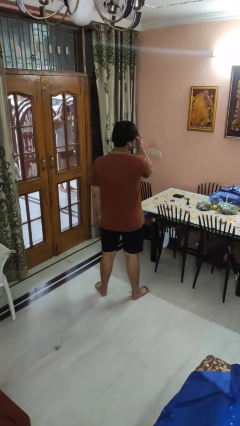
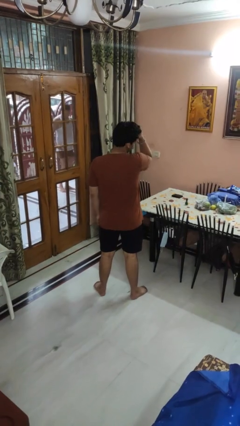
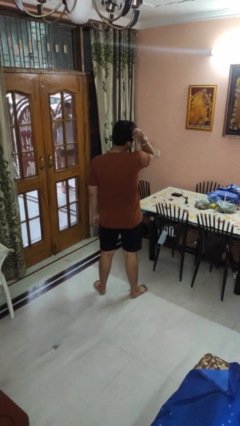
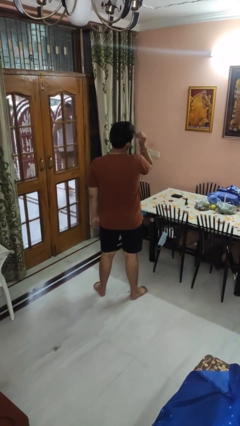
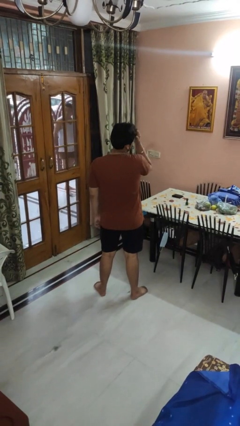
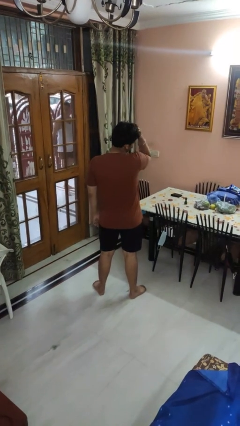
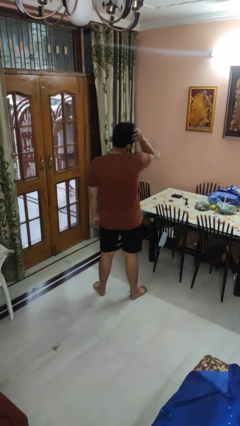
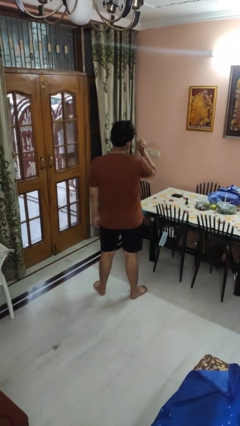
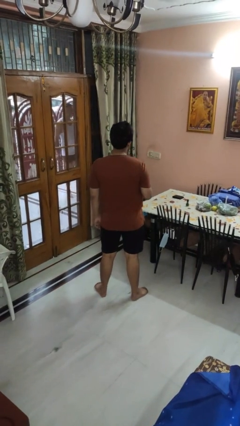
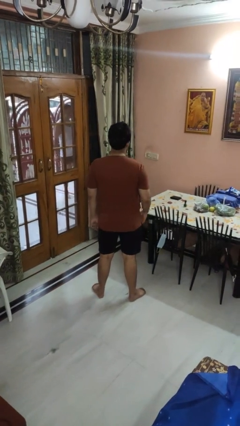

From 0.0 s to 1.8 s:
person strokes hair

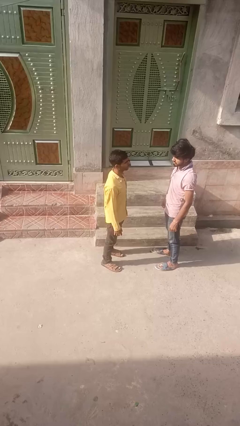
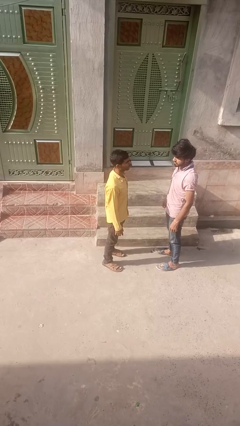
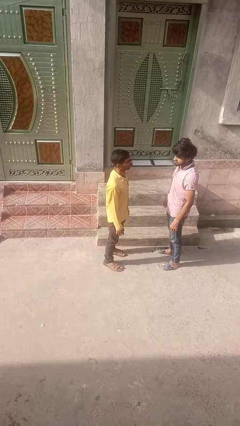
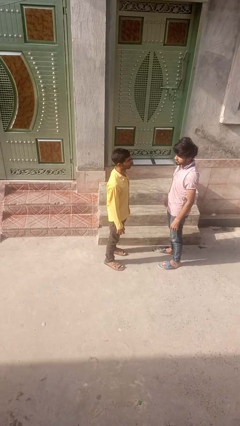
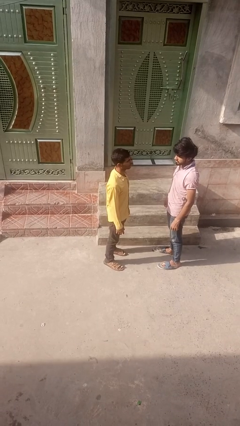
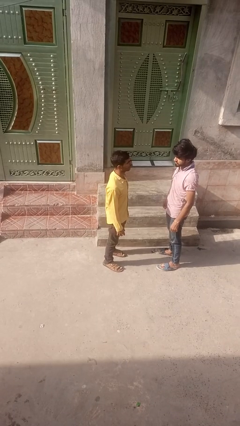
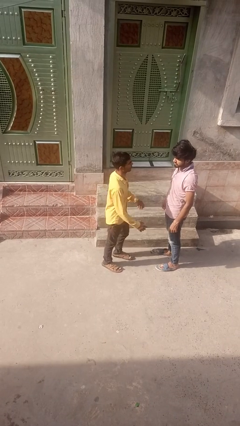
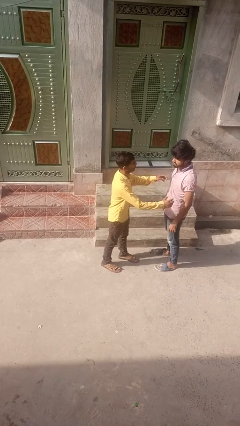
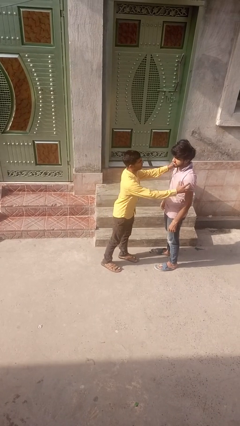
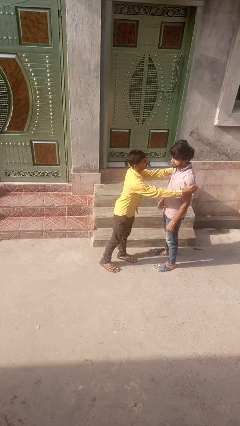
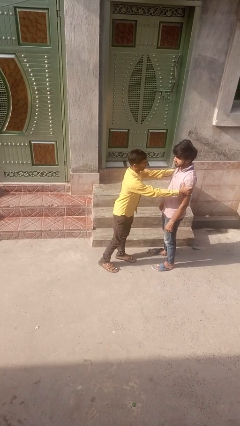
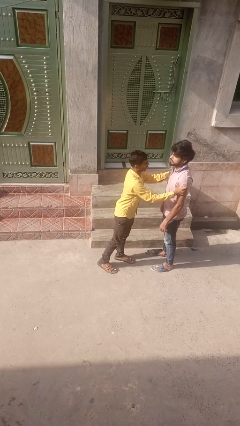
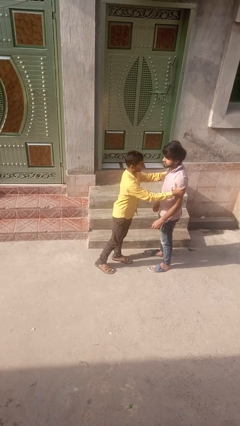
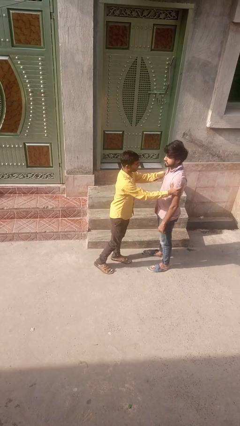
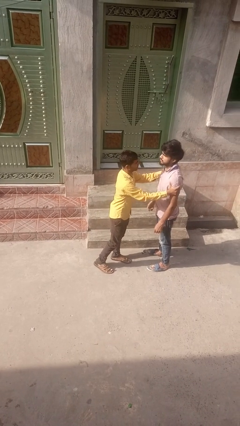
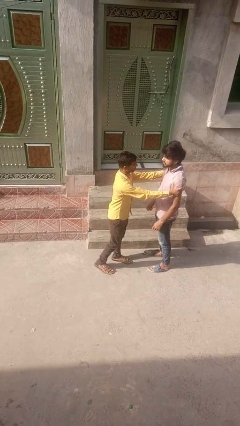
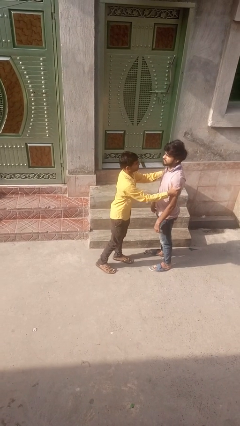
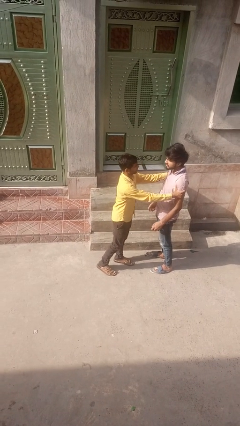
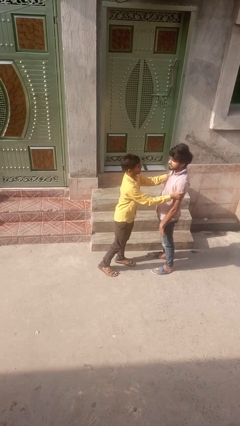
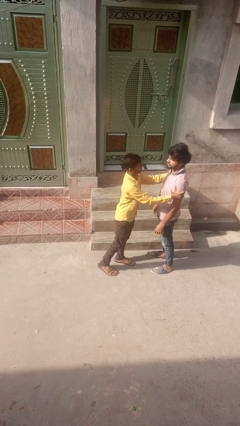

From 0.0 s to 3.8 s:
person grabs person by bicep

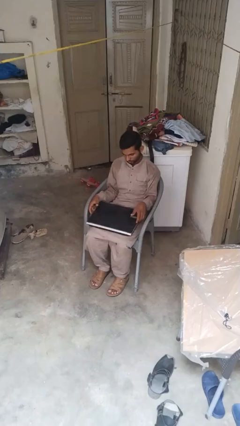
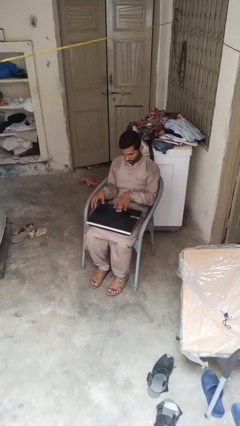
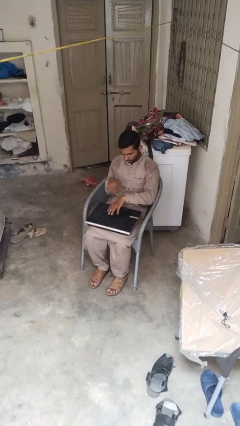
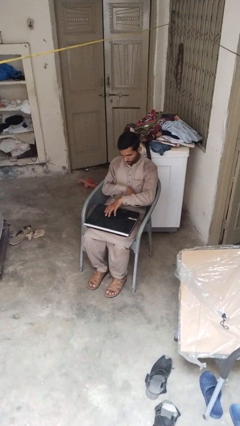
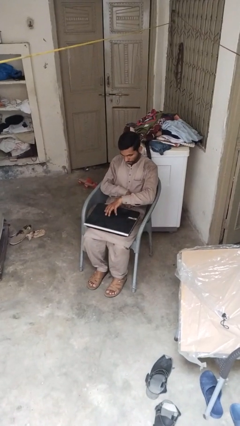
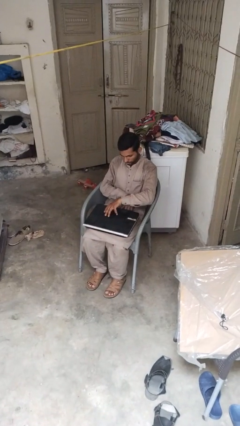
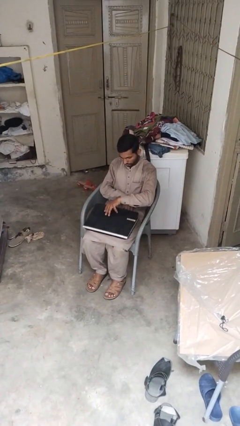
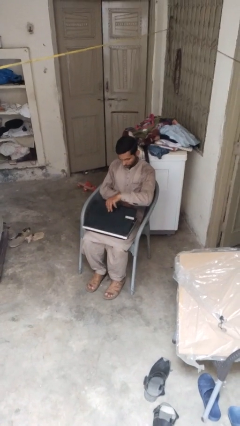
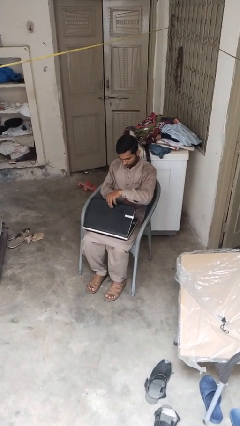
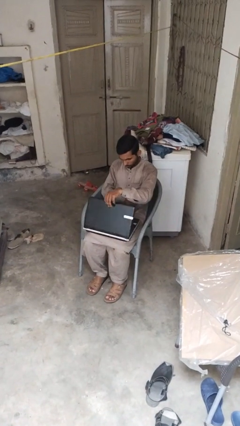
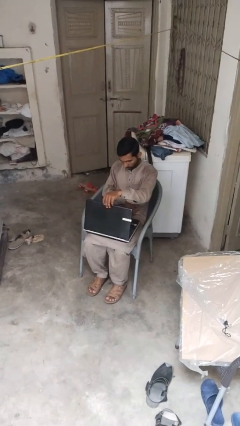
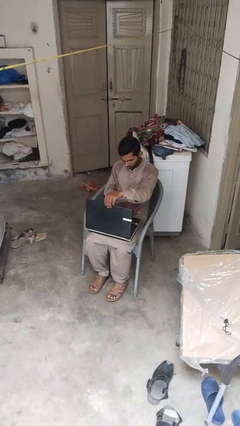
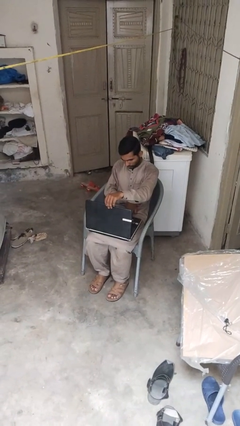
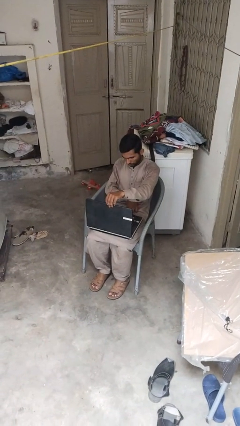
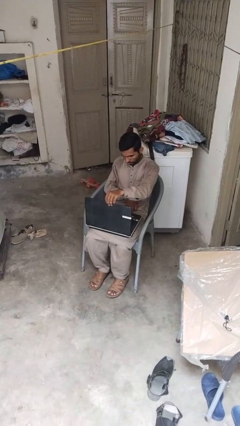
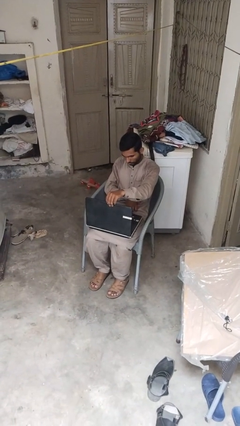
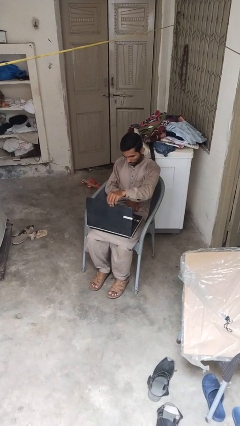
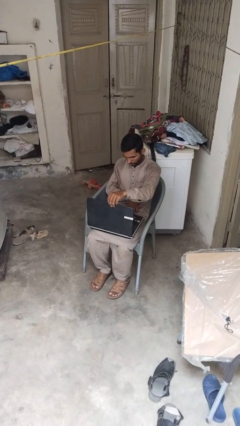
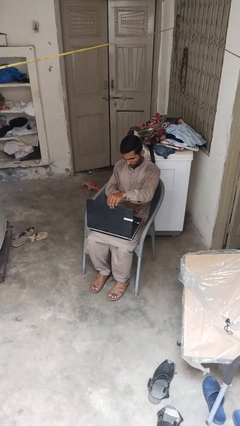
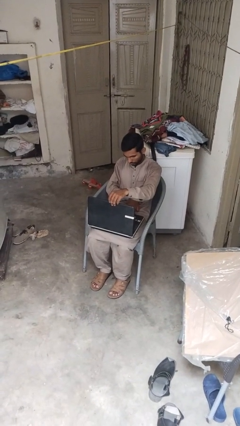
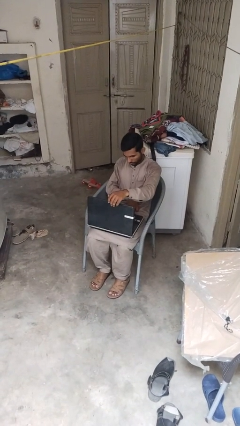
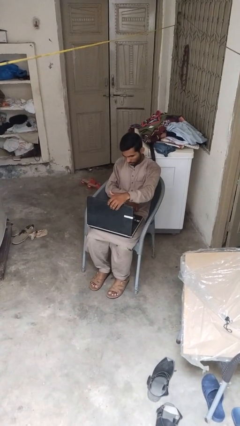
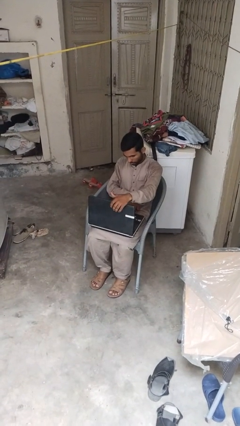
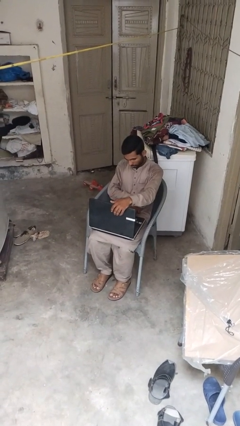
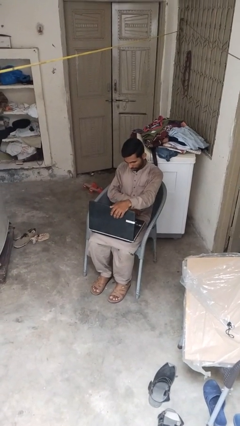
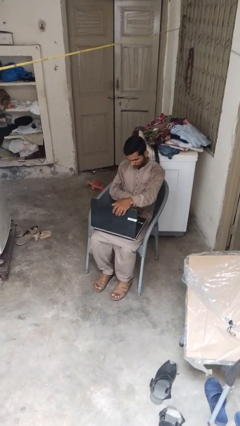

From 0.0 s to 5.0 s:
person opens laptop

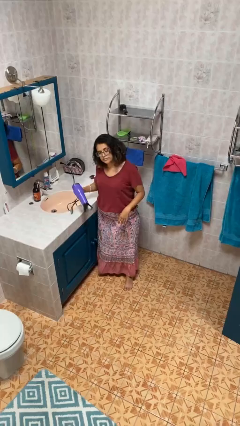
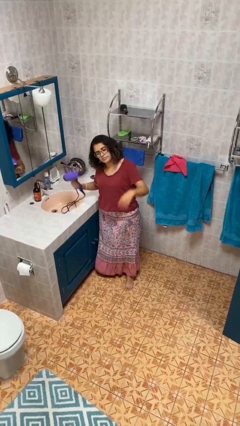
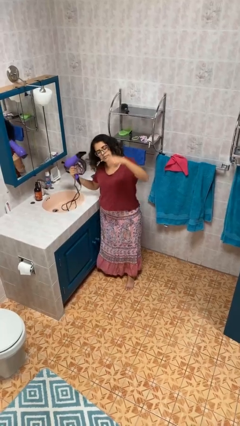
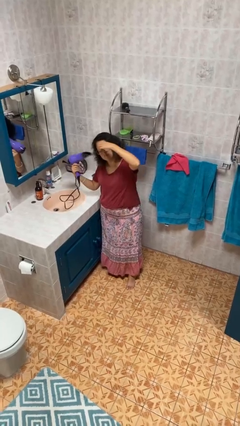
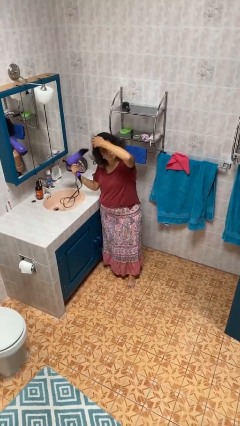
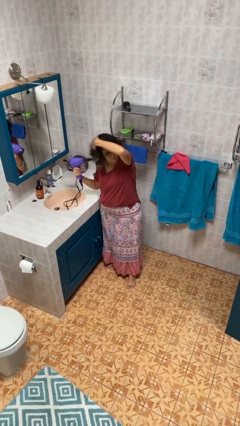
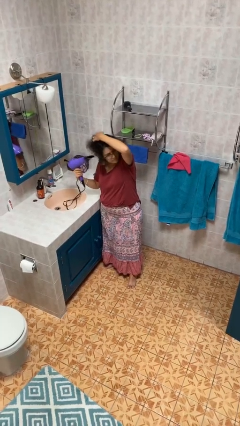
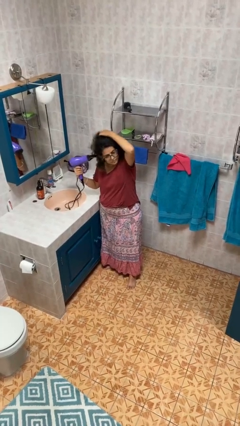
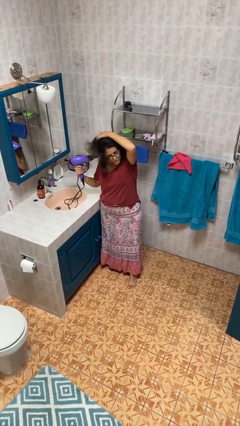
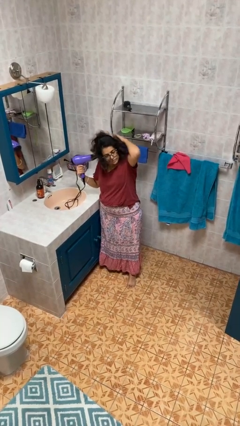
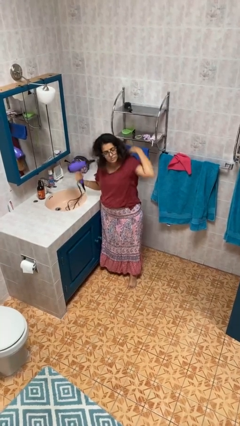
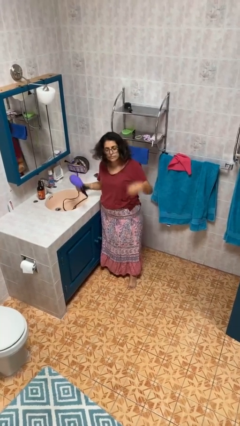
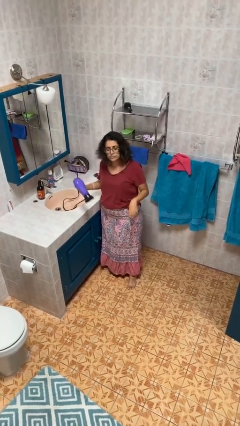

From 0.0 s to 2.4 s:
person dries hair with hairdryer

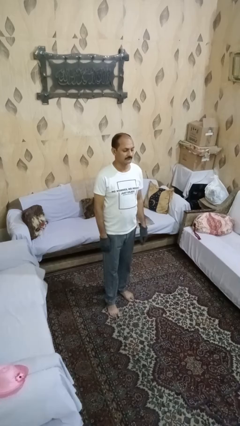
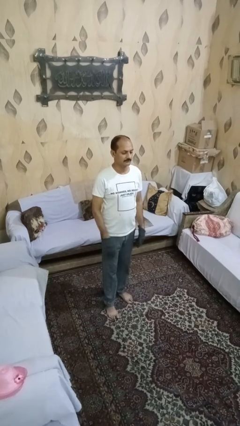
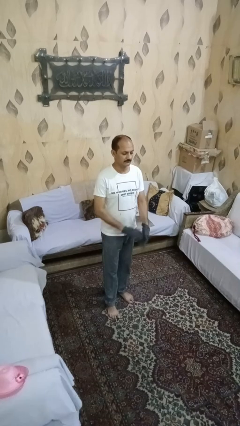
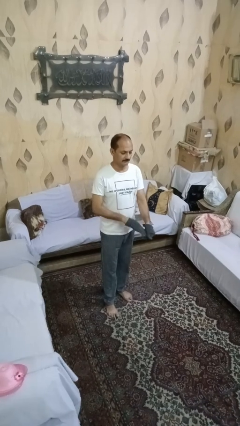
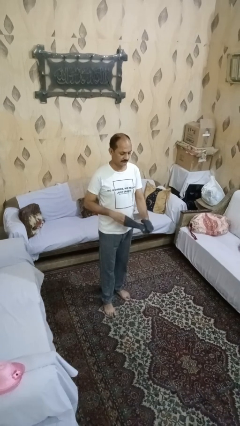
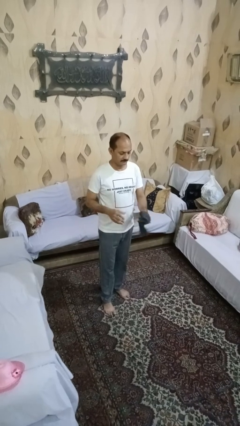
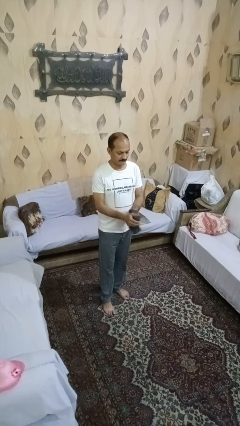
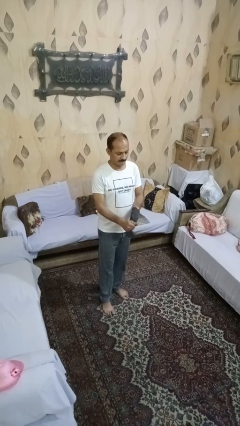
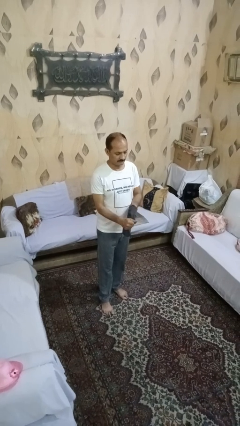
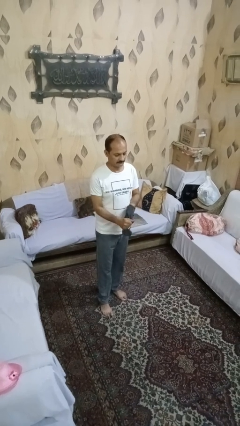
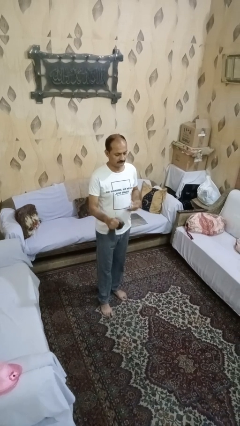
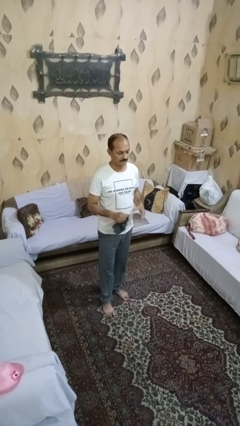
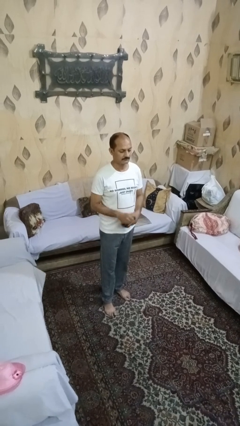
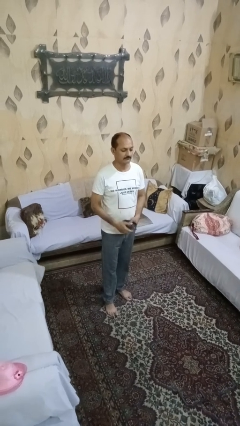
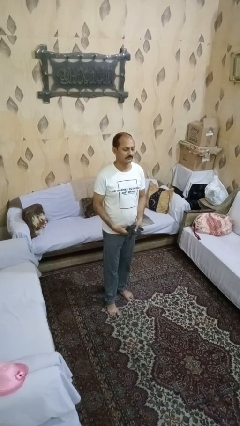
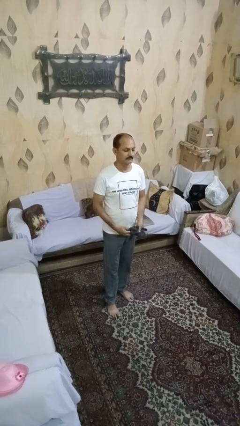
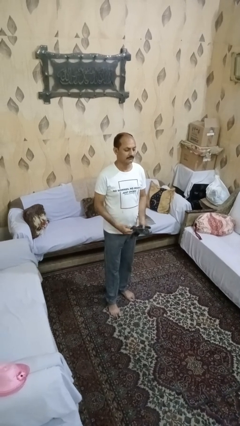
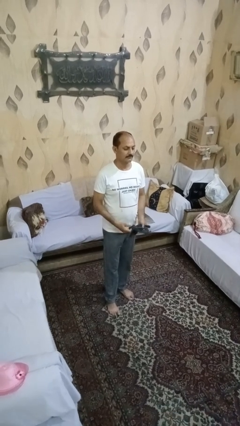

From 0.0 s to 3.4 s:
person takes off gloves

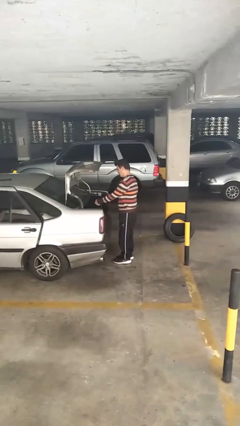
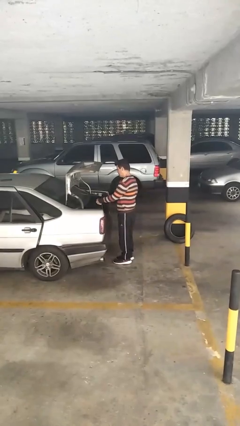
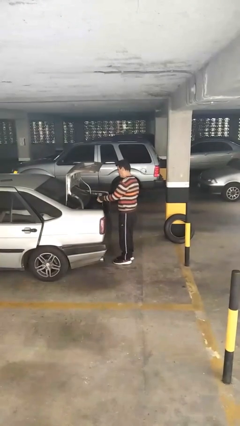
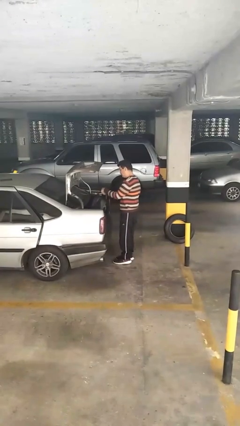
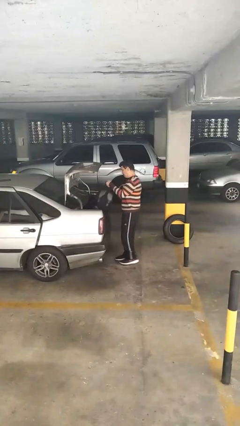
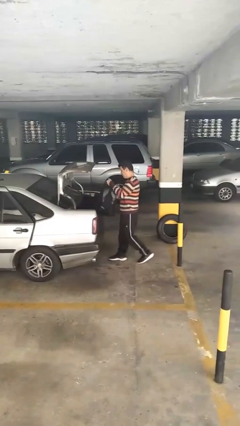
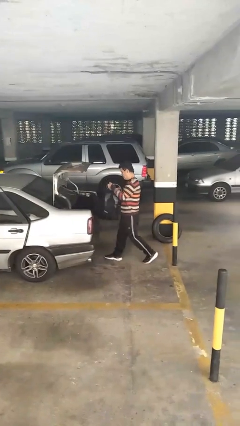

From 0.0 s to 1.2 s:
person unloads car

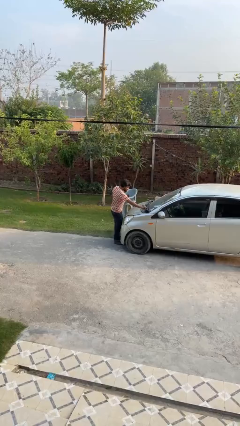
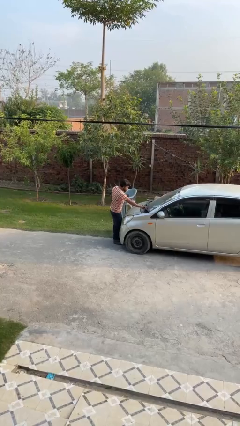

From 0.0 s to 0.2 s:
person flips up car wipers
